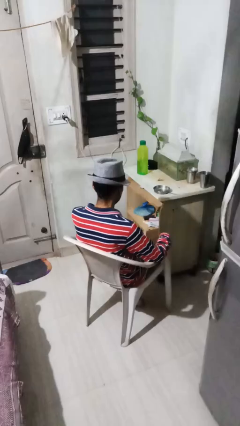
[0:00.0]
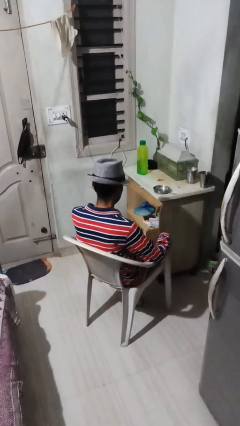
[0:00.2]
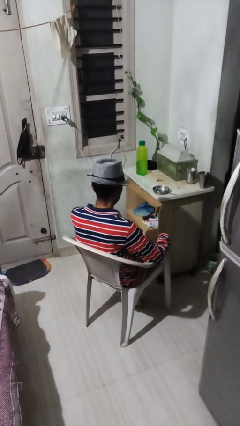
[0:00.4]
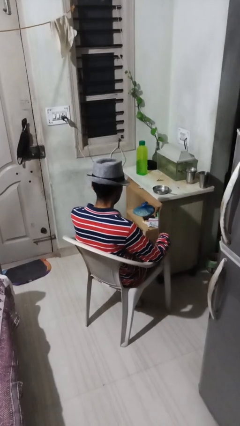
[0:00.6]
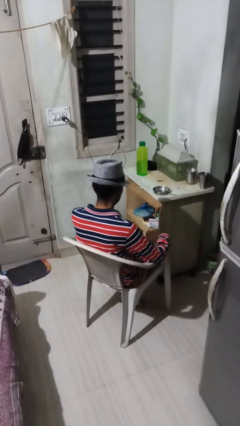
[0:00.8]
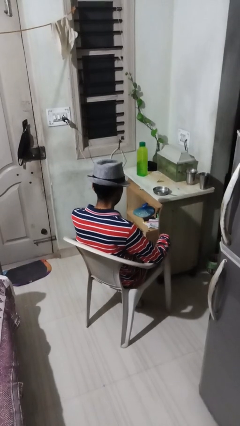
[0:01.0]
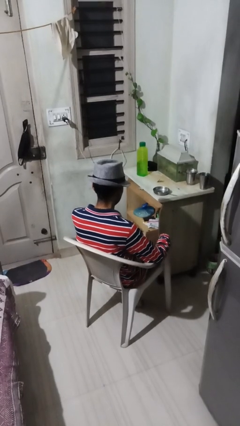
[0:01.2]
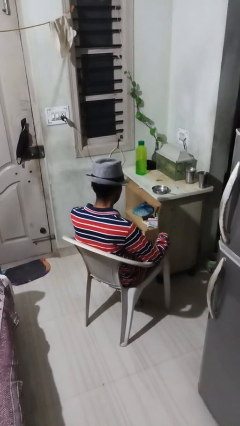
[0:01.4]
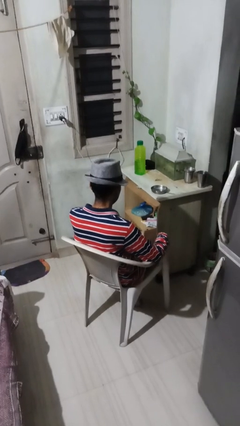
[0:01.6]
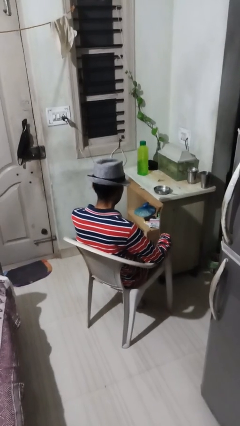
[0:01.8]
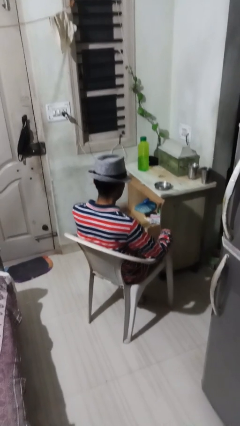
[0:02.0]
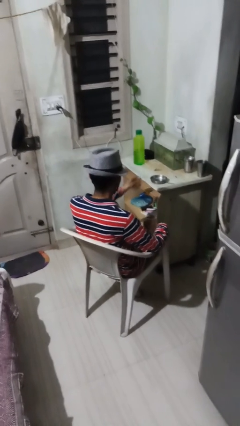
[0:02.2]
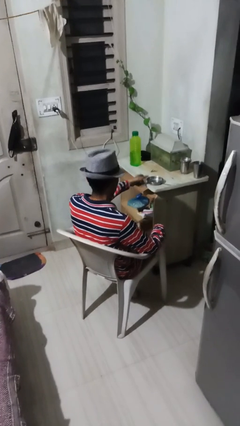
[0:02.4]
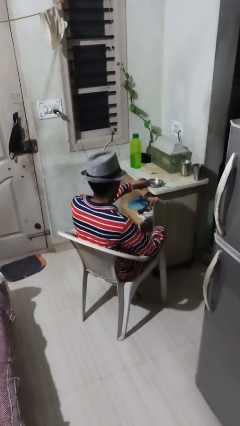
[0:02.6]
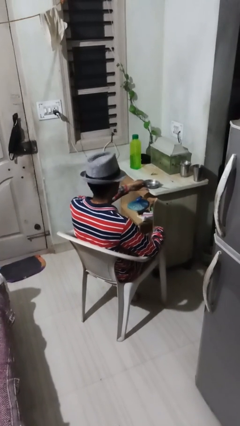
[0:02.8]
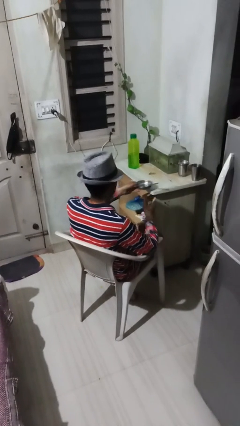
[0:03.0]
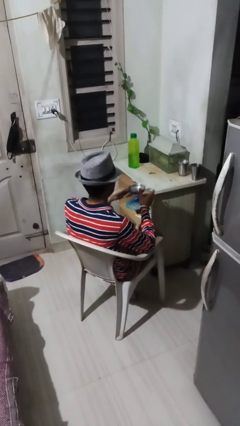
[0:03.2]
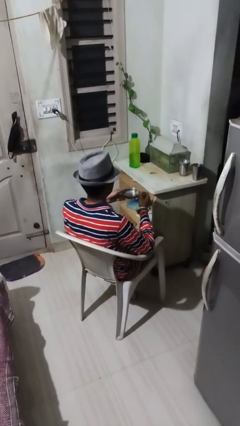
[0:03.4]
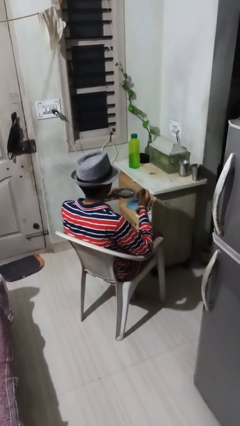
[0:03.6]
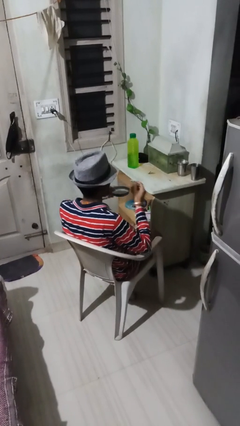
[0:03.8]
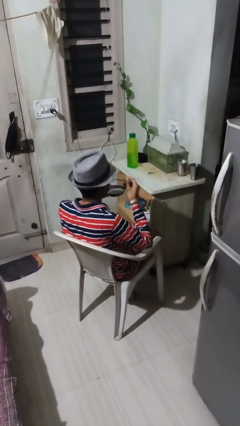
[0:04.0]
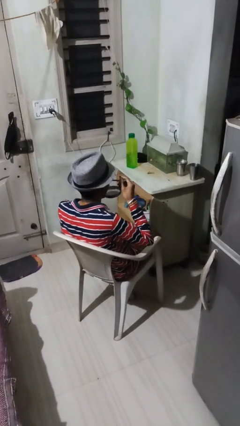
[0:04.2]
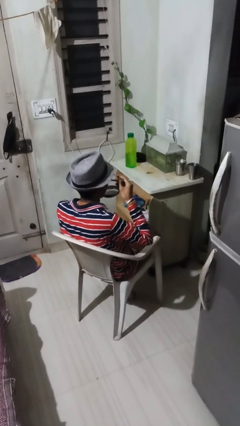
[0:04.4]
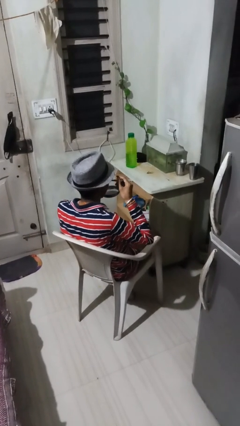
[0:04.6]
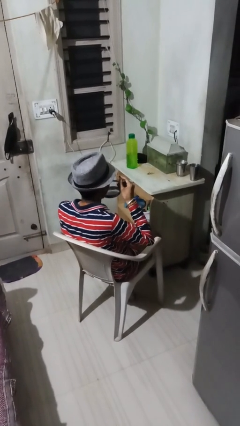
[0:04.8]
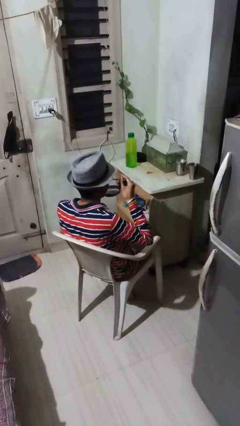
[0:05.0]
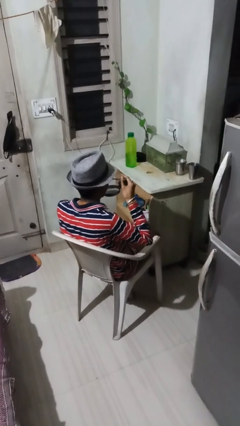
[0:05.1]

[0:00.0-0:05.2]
person eats with utensil

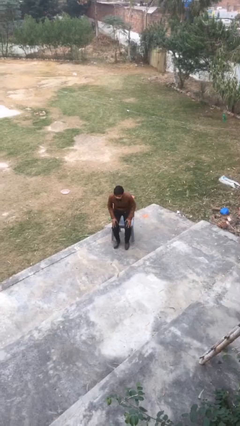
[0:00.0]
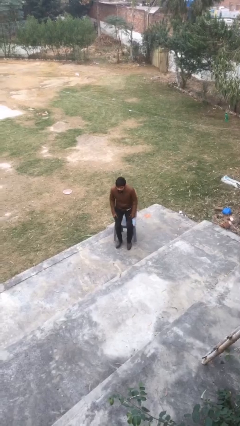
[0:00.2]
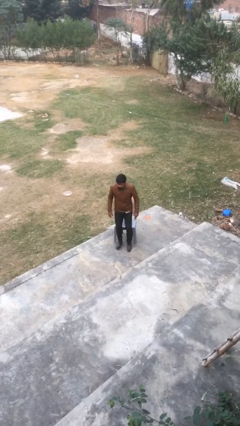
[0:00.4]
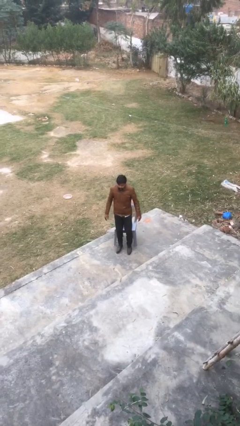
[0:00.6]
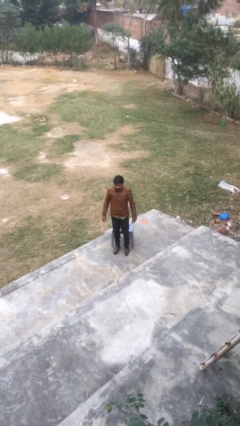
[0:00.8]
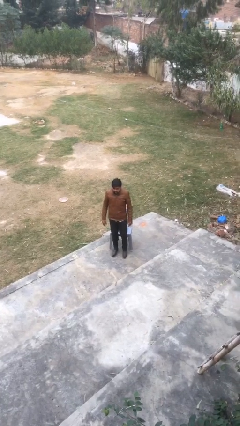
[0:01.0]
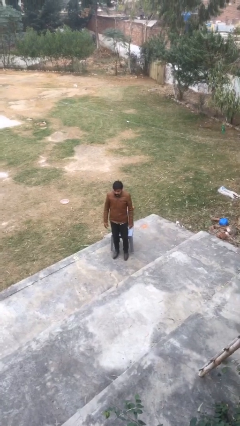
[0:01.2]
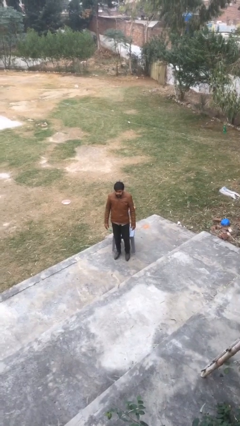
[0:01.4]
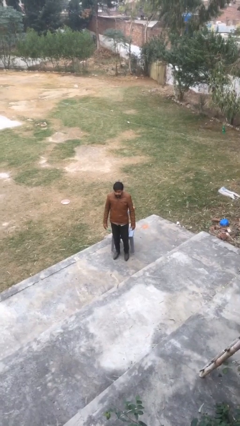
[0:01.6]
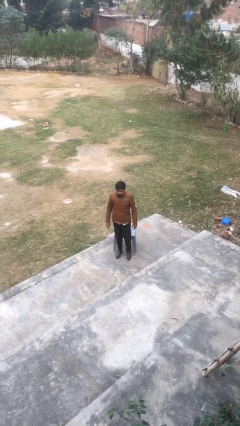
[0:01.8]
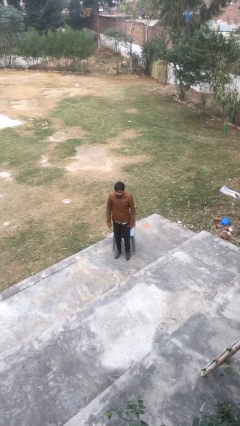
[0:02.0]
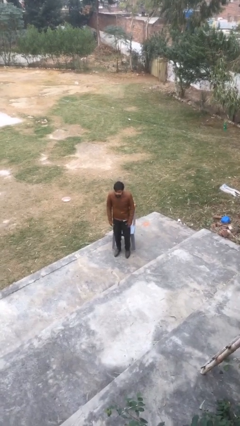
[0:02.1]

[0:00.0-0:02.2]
person stands up

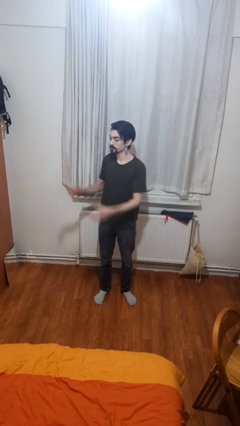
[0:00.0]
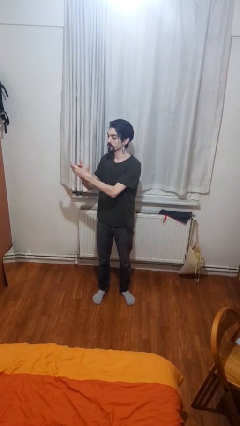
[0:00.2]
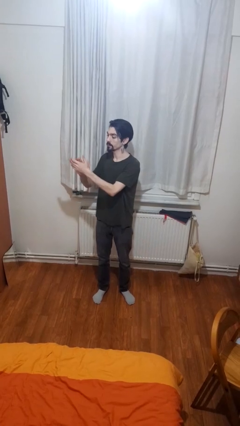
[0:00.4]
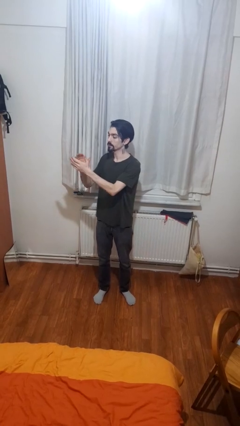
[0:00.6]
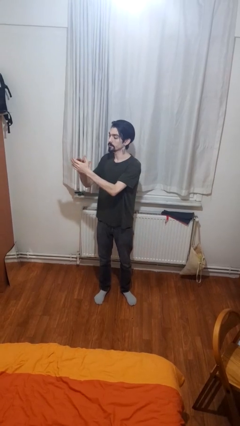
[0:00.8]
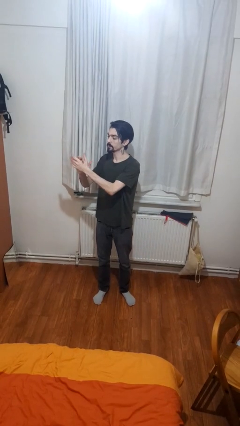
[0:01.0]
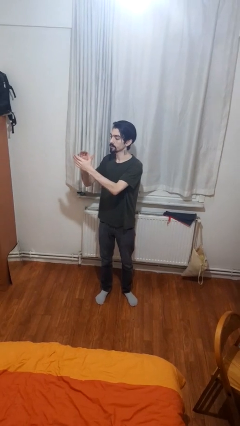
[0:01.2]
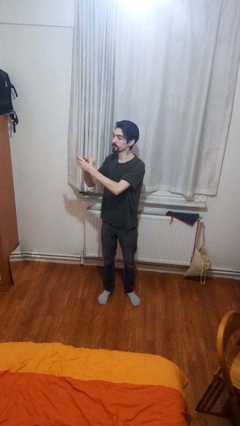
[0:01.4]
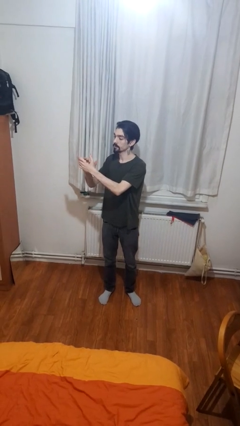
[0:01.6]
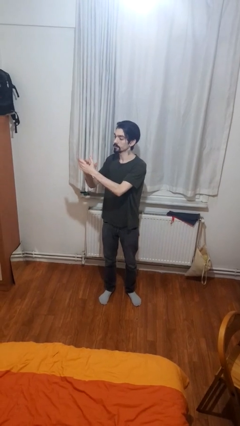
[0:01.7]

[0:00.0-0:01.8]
person claps hands

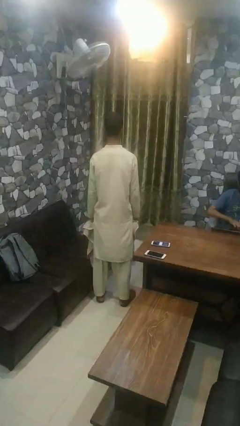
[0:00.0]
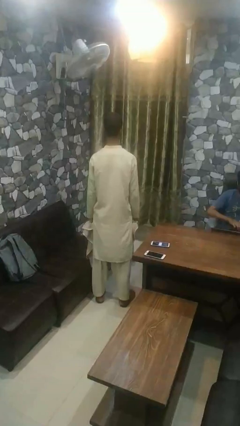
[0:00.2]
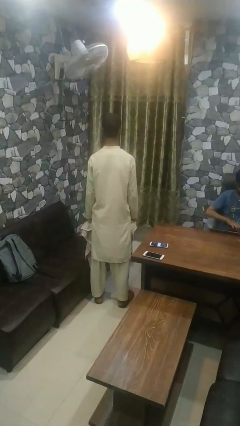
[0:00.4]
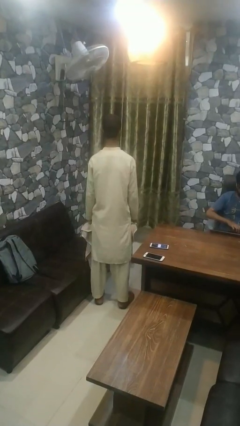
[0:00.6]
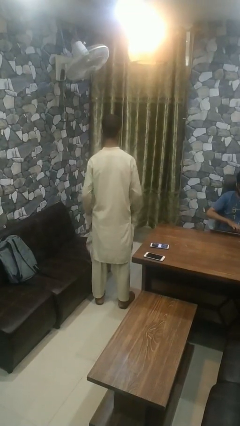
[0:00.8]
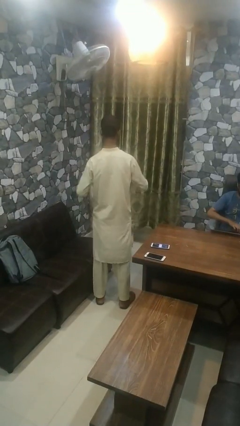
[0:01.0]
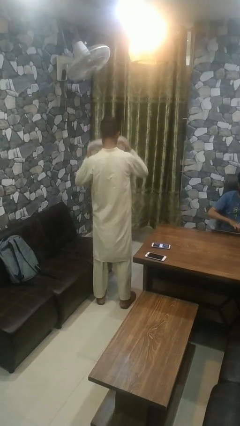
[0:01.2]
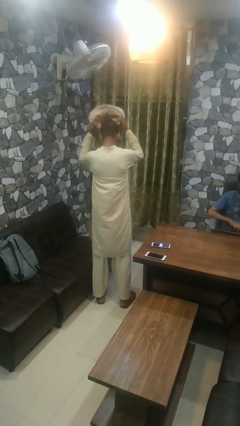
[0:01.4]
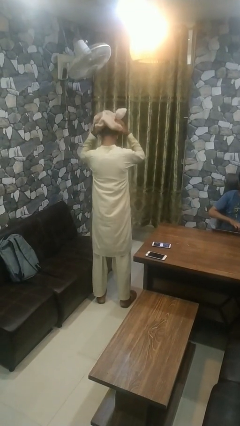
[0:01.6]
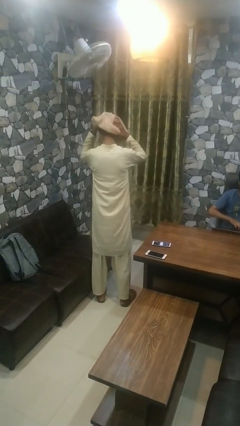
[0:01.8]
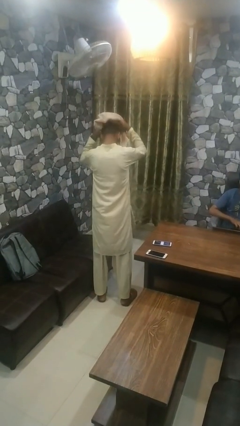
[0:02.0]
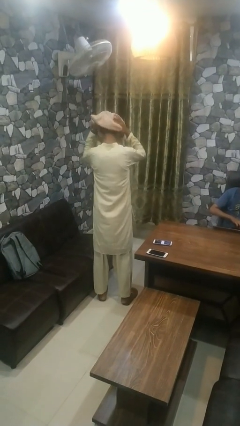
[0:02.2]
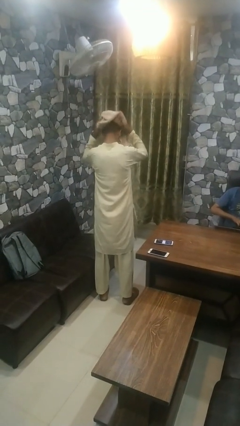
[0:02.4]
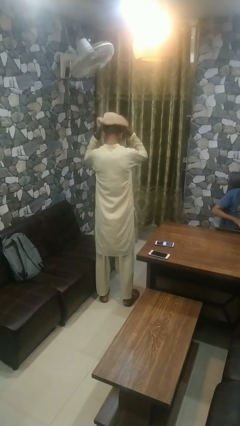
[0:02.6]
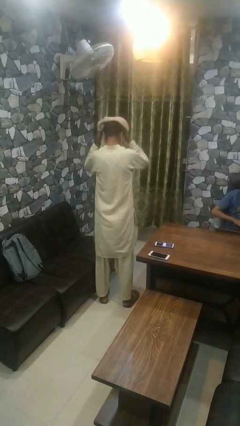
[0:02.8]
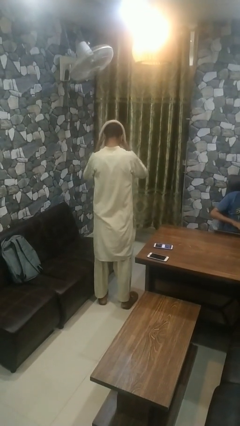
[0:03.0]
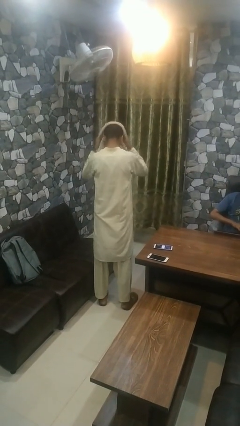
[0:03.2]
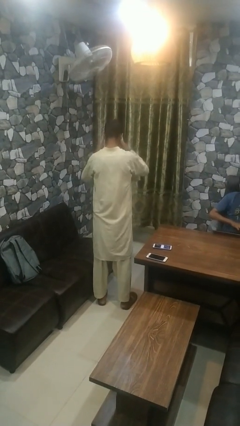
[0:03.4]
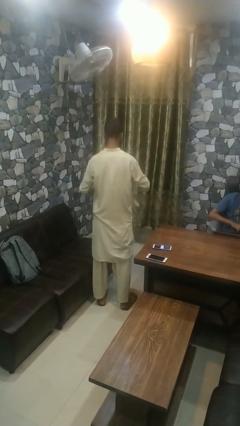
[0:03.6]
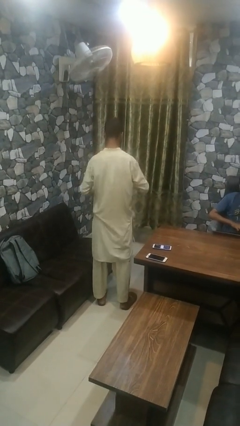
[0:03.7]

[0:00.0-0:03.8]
person dries hair with towel

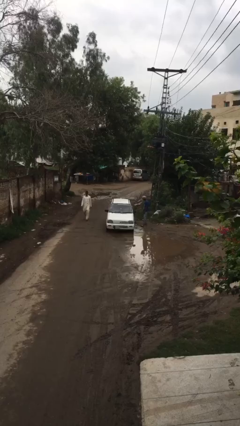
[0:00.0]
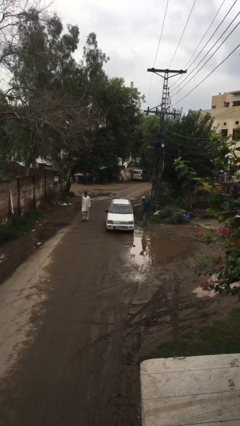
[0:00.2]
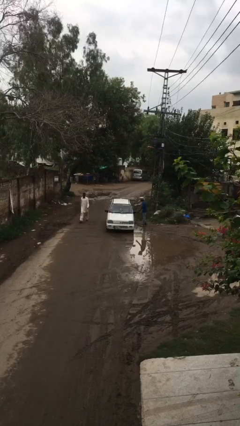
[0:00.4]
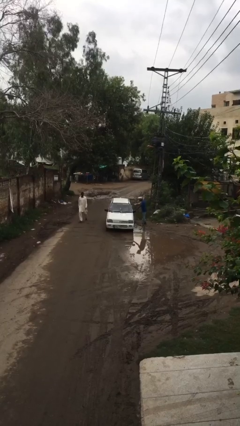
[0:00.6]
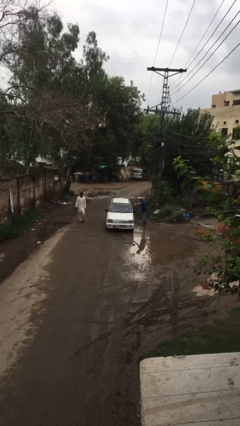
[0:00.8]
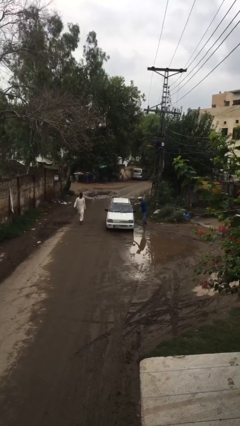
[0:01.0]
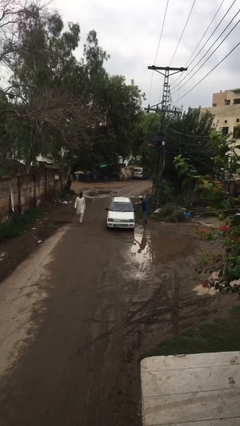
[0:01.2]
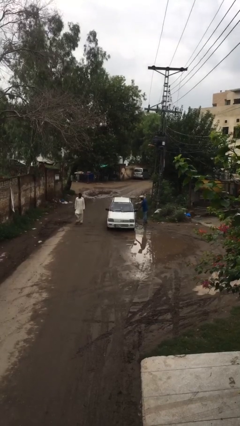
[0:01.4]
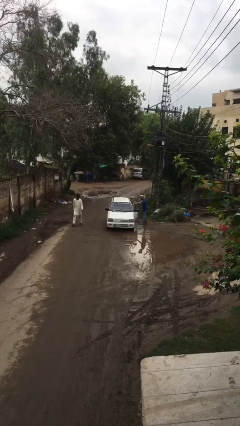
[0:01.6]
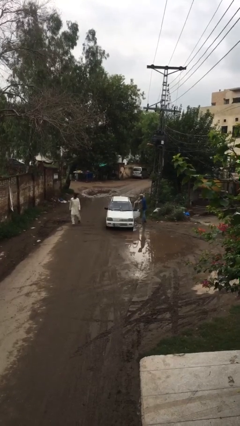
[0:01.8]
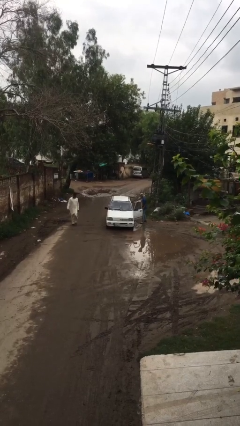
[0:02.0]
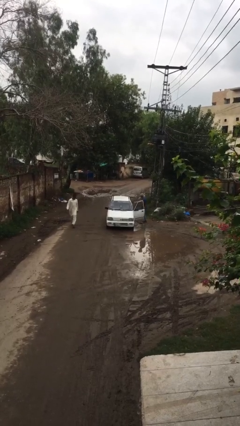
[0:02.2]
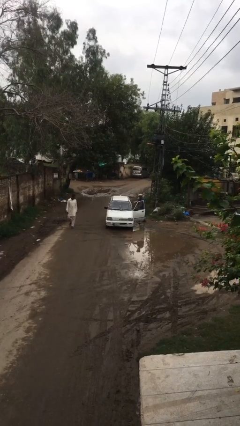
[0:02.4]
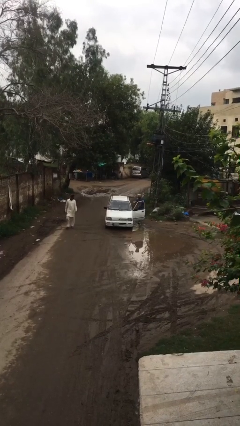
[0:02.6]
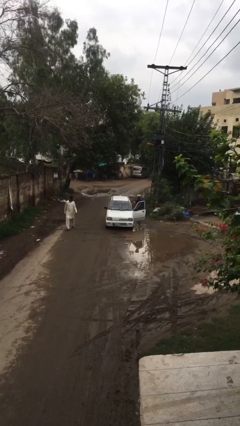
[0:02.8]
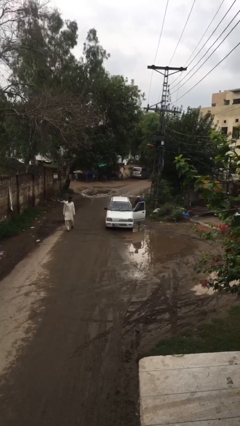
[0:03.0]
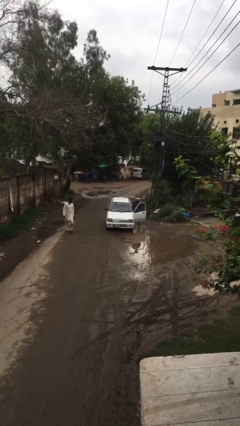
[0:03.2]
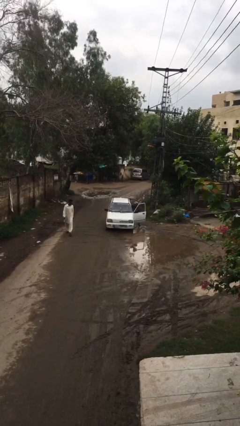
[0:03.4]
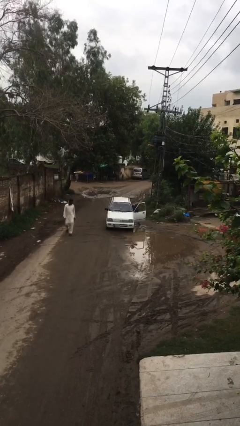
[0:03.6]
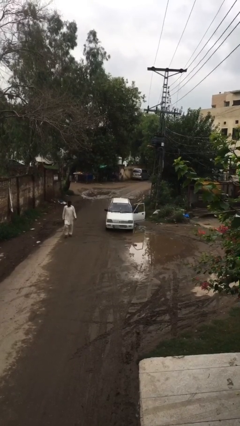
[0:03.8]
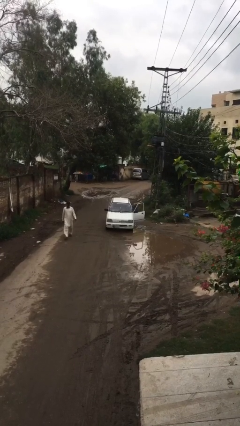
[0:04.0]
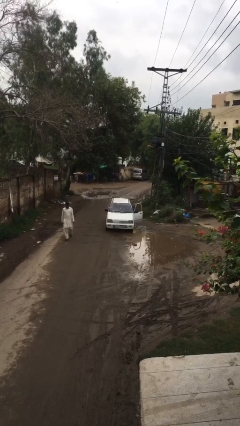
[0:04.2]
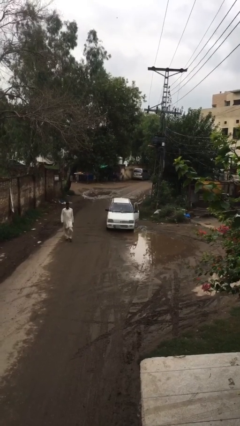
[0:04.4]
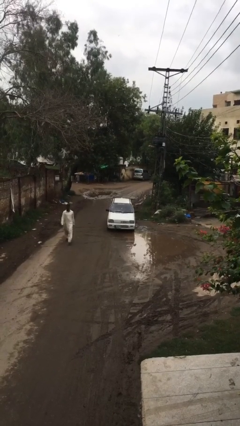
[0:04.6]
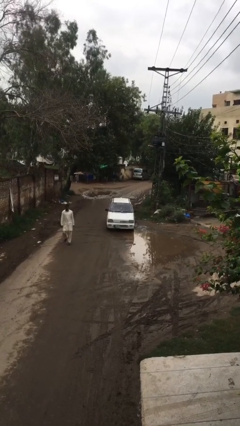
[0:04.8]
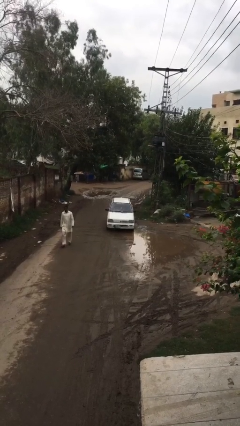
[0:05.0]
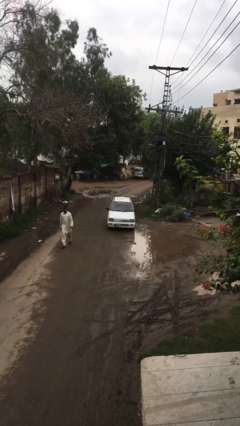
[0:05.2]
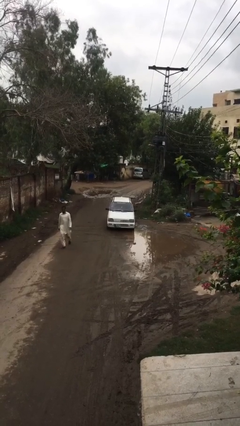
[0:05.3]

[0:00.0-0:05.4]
car picks up person
